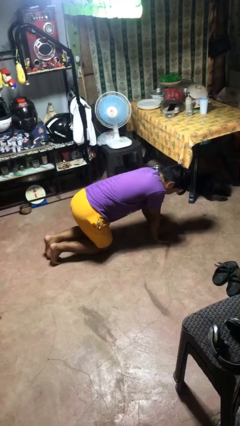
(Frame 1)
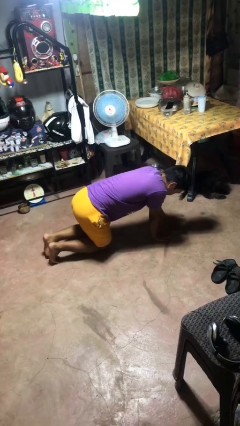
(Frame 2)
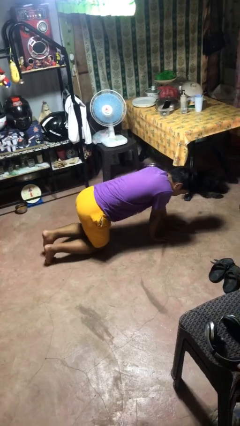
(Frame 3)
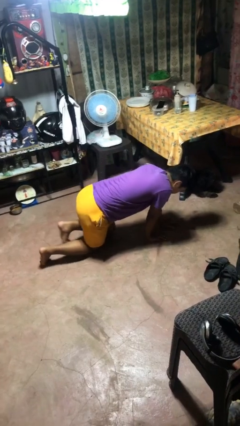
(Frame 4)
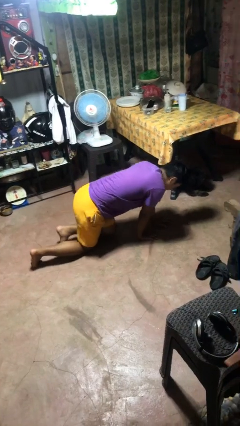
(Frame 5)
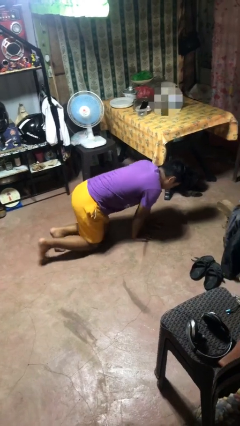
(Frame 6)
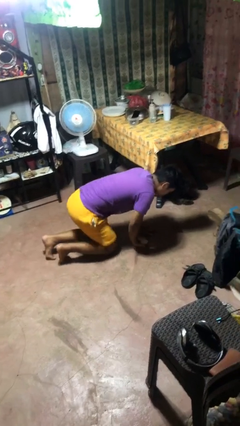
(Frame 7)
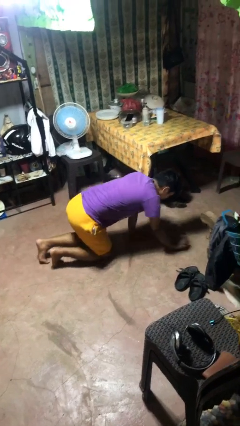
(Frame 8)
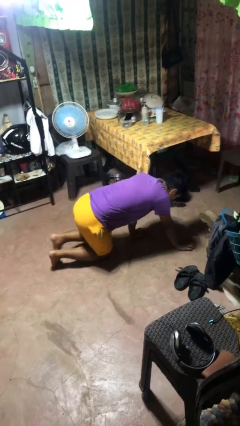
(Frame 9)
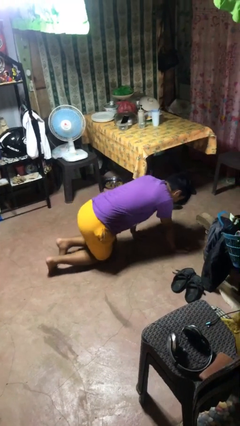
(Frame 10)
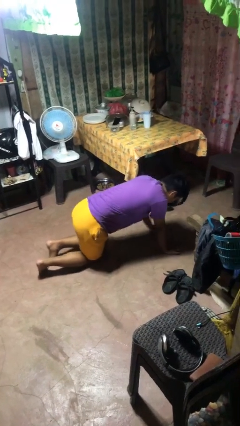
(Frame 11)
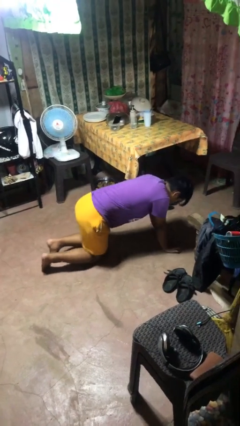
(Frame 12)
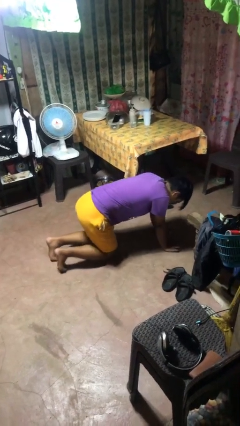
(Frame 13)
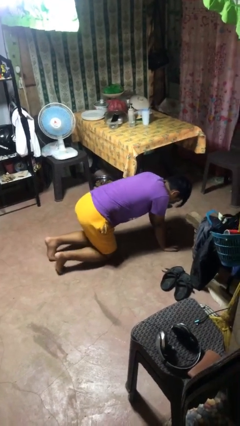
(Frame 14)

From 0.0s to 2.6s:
person crawls

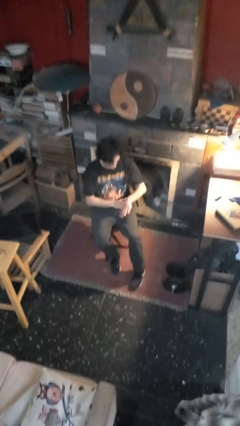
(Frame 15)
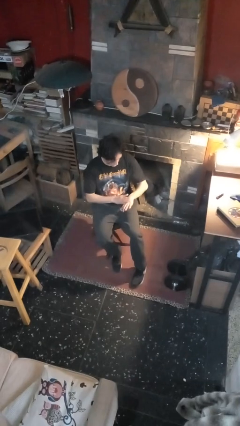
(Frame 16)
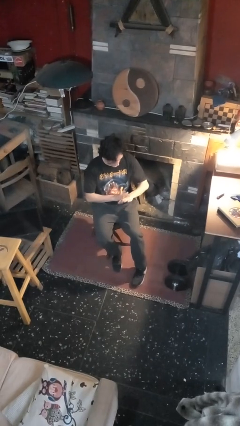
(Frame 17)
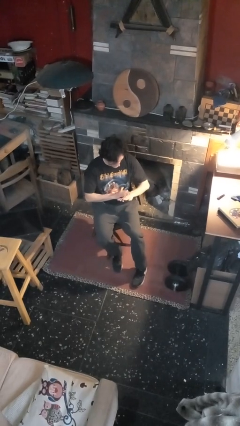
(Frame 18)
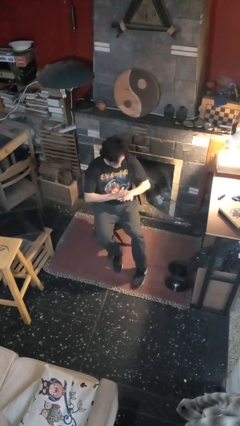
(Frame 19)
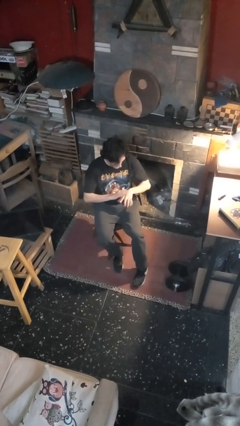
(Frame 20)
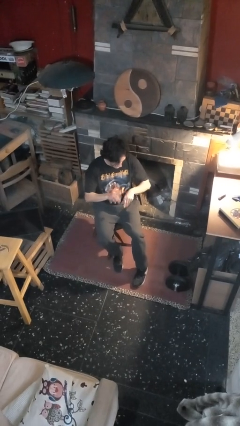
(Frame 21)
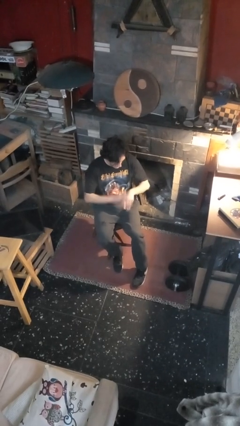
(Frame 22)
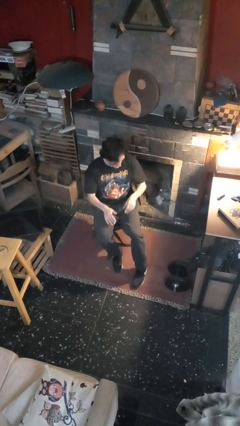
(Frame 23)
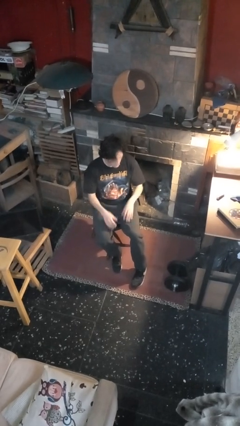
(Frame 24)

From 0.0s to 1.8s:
person swats bug

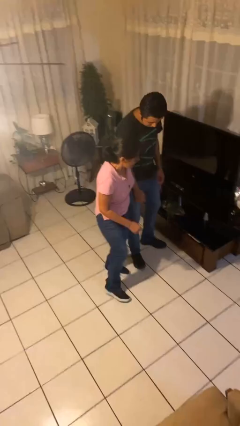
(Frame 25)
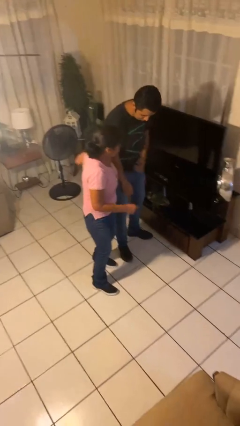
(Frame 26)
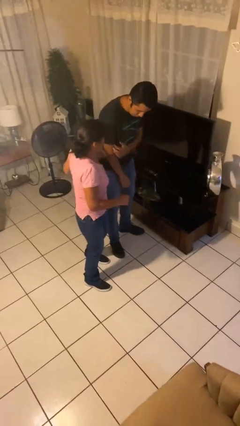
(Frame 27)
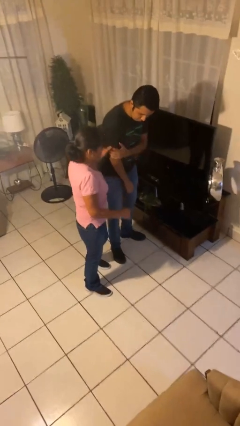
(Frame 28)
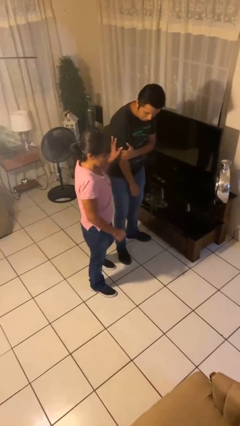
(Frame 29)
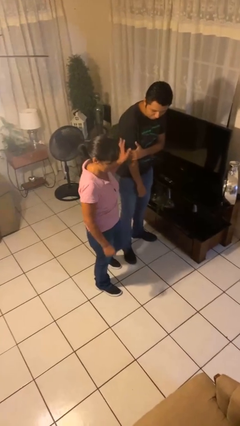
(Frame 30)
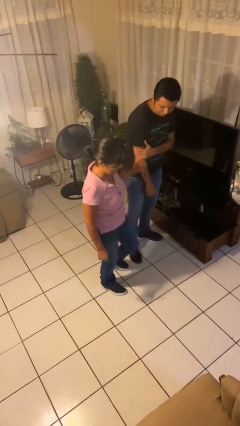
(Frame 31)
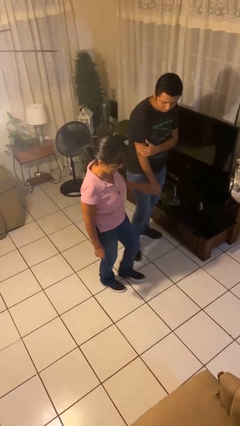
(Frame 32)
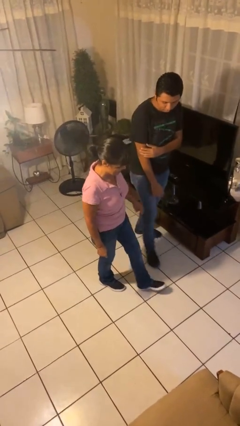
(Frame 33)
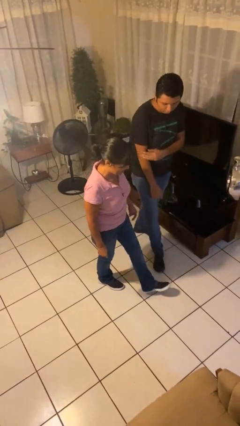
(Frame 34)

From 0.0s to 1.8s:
person bumps into person

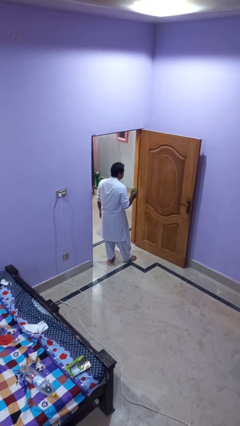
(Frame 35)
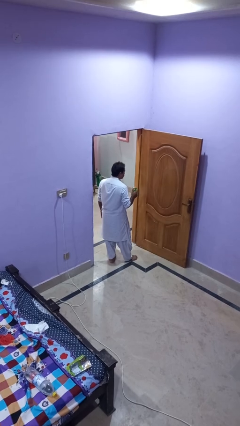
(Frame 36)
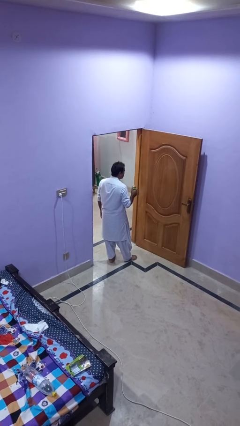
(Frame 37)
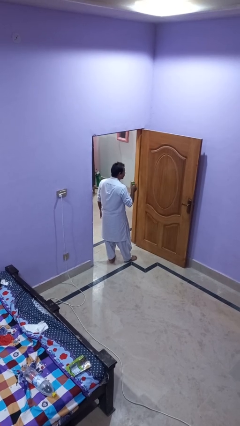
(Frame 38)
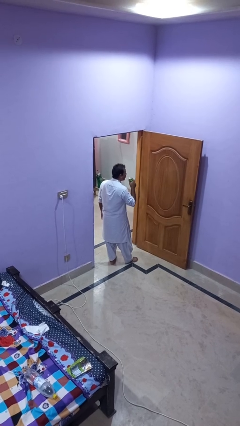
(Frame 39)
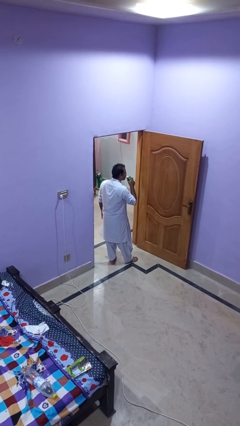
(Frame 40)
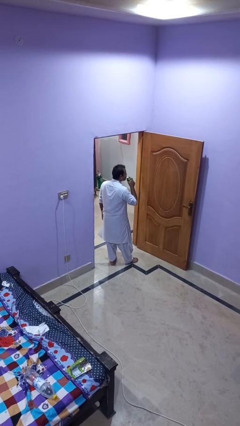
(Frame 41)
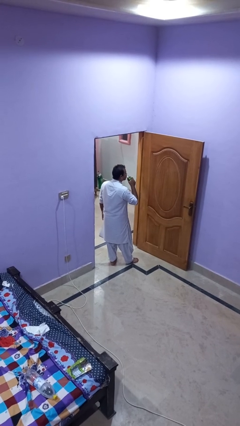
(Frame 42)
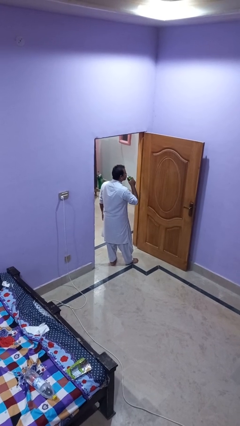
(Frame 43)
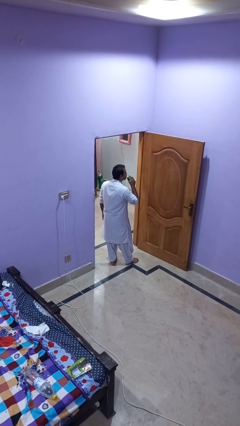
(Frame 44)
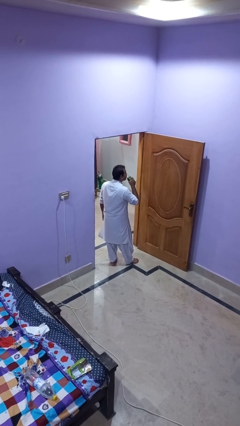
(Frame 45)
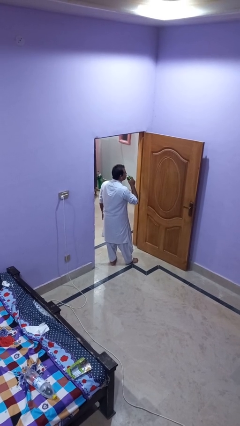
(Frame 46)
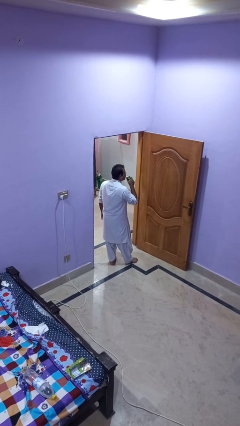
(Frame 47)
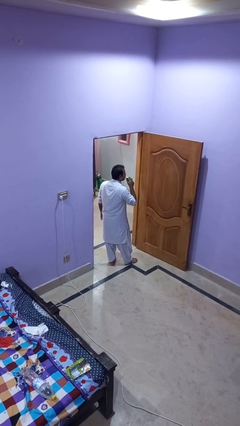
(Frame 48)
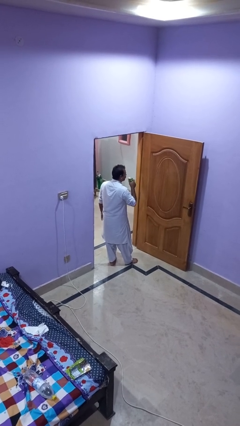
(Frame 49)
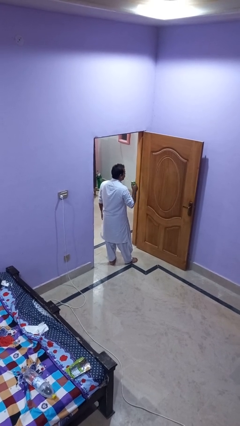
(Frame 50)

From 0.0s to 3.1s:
person drinks from straw

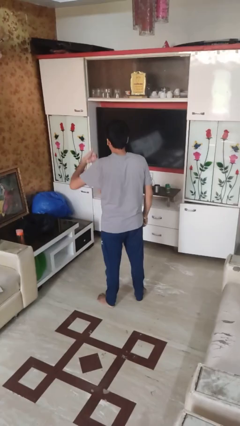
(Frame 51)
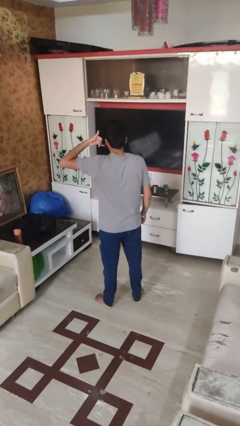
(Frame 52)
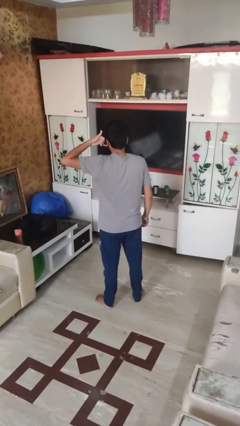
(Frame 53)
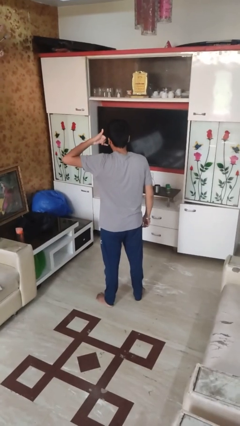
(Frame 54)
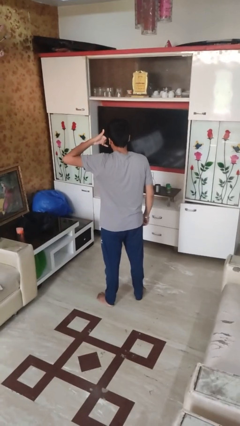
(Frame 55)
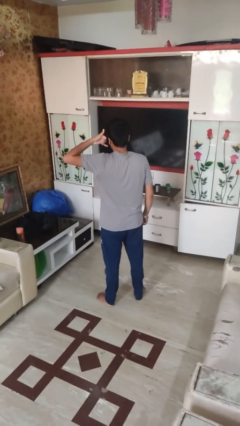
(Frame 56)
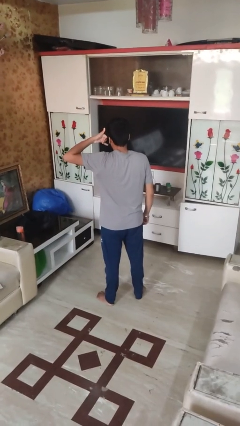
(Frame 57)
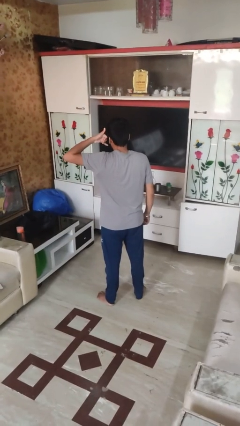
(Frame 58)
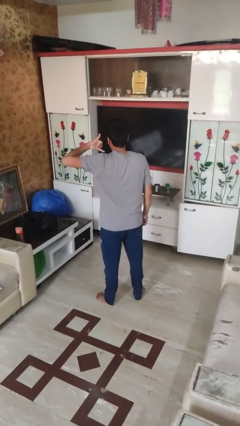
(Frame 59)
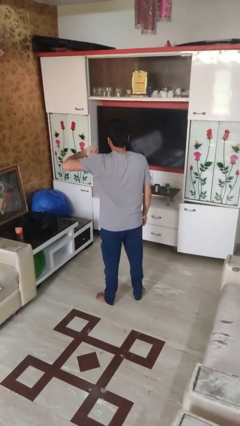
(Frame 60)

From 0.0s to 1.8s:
person gestures call me

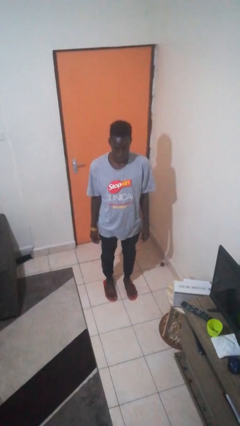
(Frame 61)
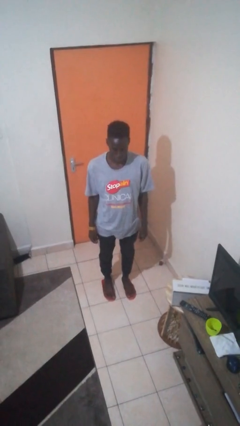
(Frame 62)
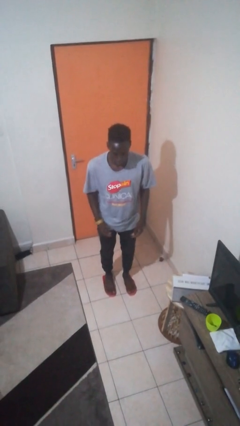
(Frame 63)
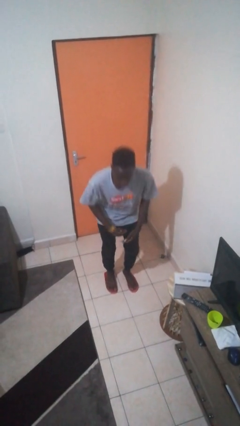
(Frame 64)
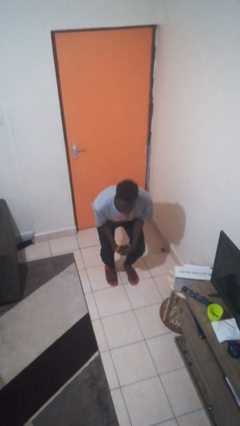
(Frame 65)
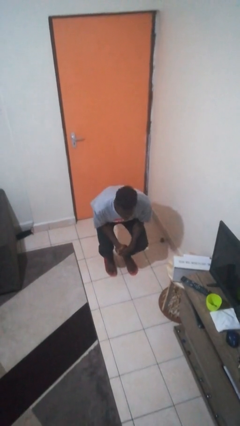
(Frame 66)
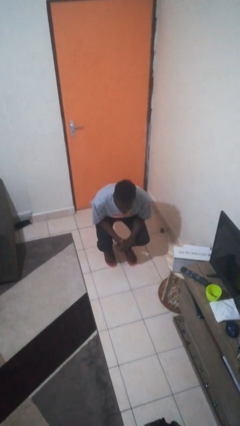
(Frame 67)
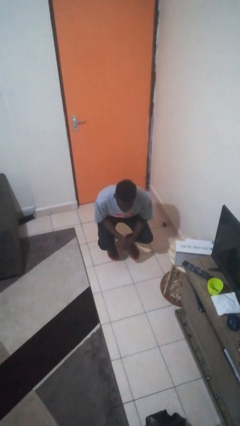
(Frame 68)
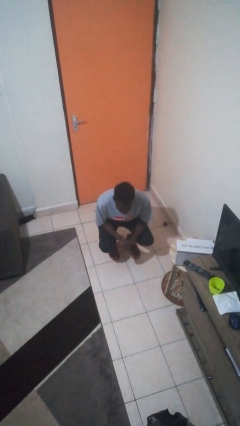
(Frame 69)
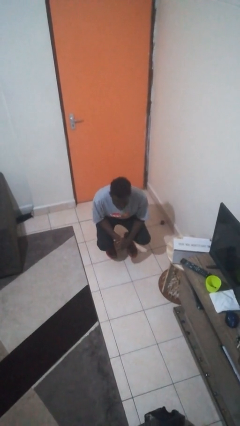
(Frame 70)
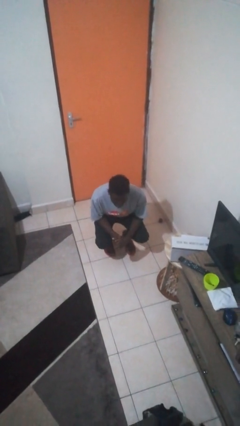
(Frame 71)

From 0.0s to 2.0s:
person squats

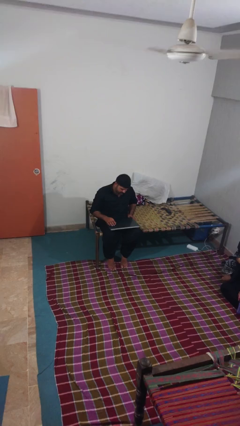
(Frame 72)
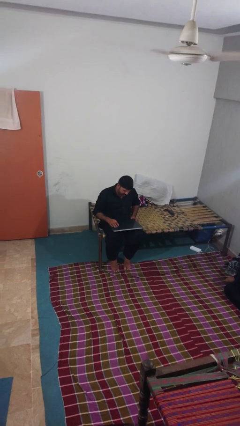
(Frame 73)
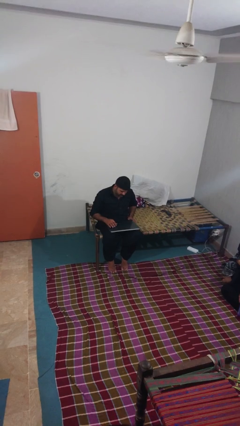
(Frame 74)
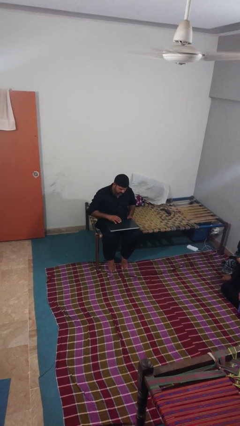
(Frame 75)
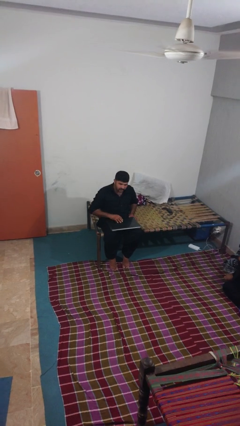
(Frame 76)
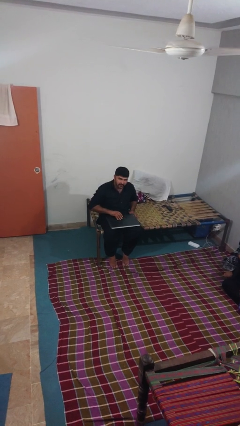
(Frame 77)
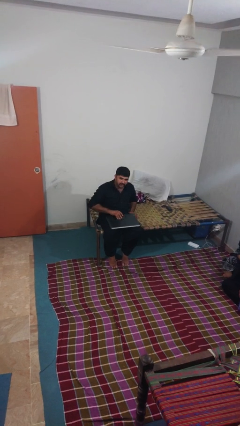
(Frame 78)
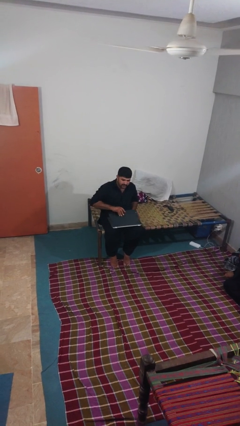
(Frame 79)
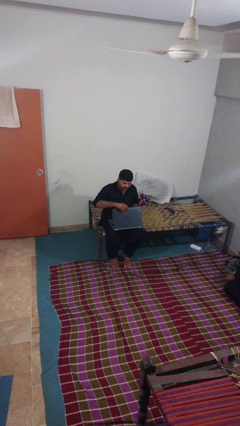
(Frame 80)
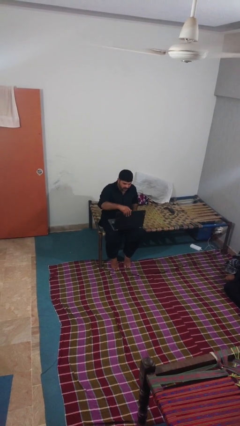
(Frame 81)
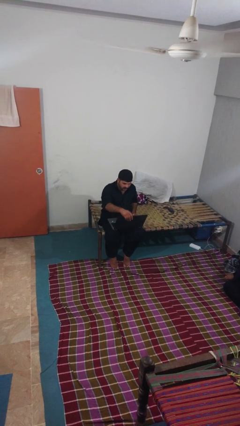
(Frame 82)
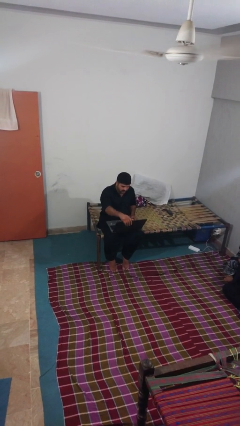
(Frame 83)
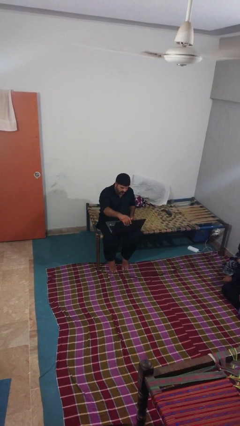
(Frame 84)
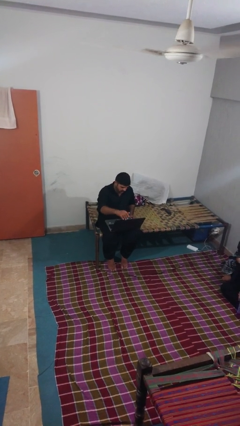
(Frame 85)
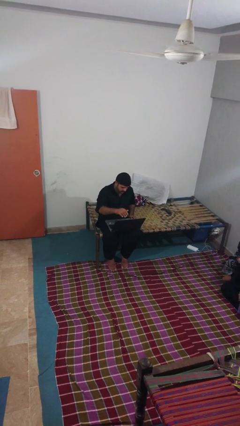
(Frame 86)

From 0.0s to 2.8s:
person opens laptop

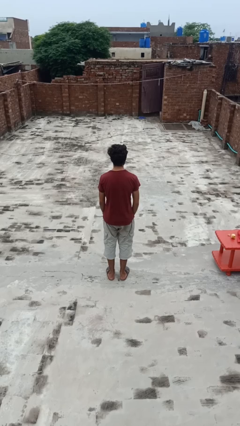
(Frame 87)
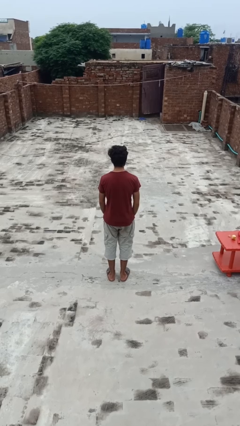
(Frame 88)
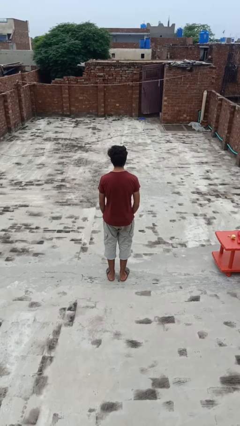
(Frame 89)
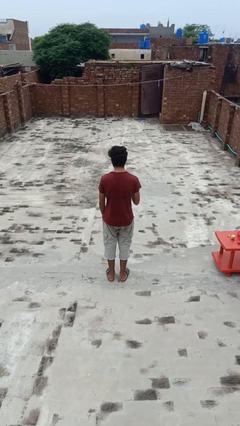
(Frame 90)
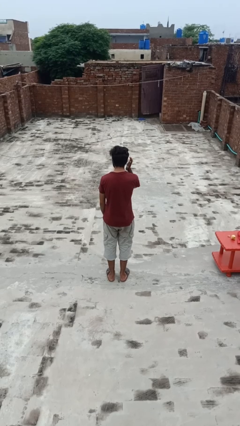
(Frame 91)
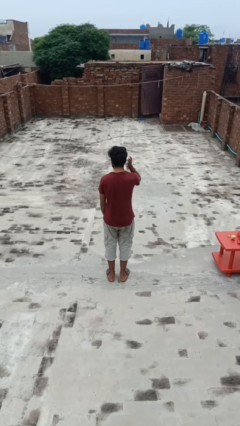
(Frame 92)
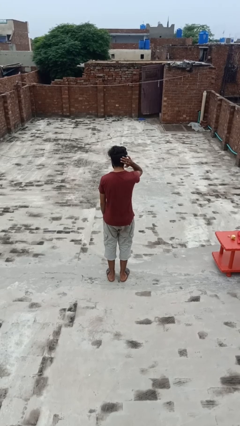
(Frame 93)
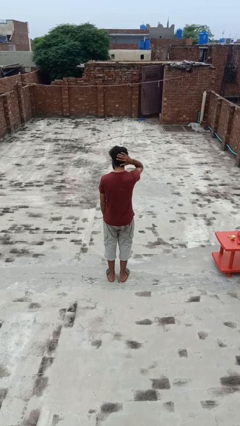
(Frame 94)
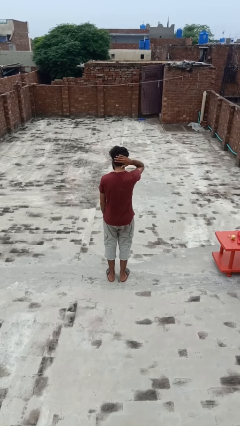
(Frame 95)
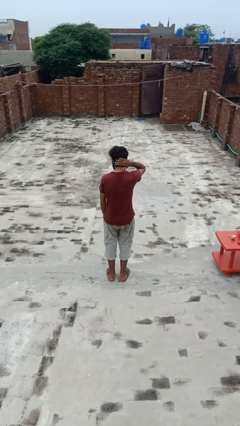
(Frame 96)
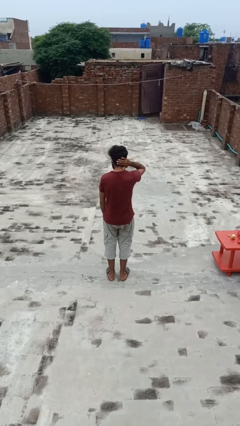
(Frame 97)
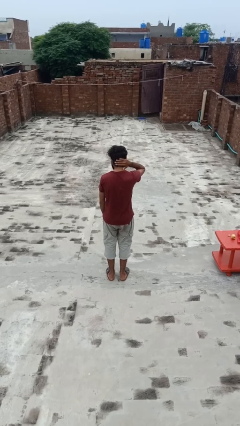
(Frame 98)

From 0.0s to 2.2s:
person pats head
